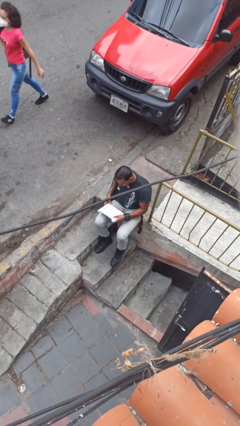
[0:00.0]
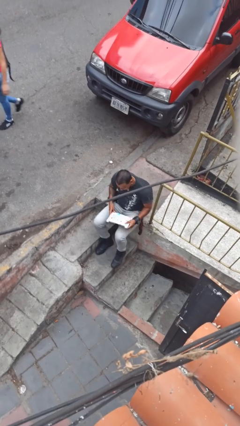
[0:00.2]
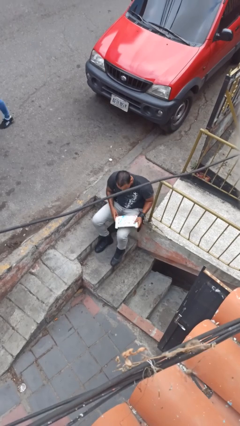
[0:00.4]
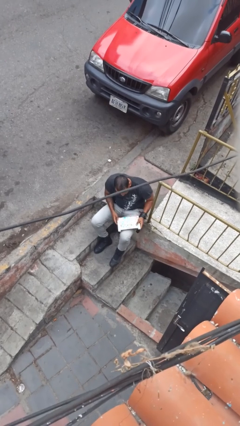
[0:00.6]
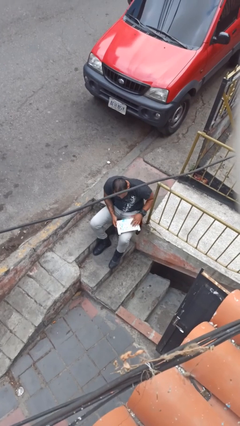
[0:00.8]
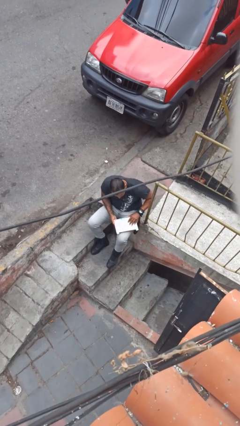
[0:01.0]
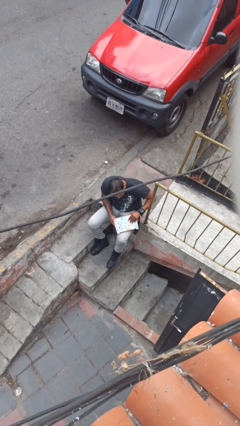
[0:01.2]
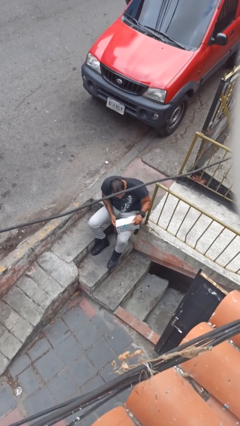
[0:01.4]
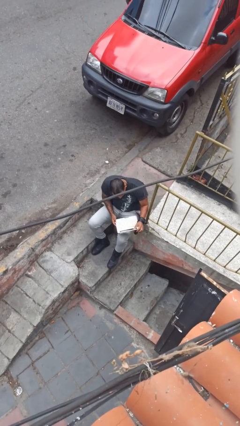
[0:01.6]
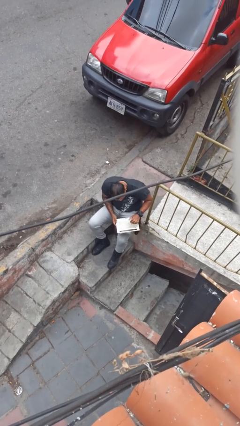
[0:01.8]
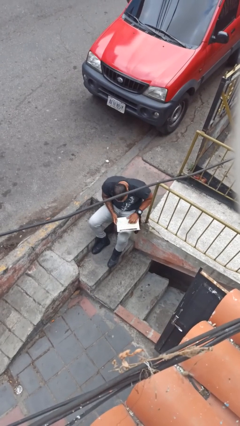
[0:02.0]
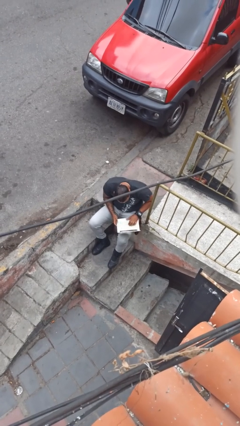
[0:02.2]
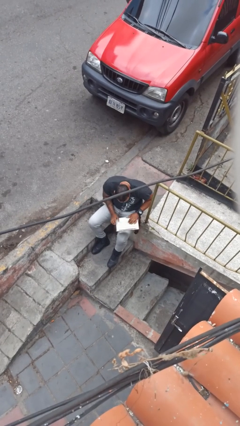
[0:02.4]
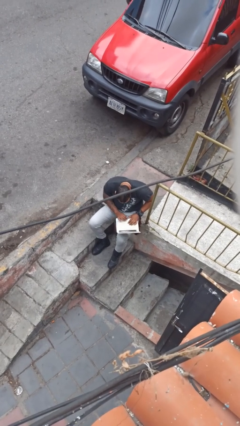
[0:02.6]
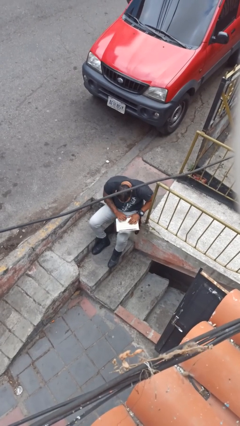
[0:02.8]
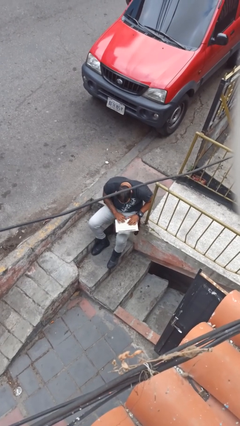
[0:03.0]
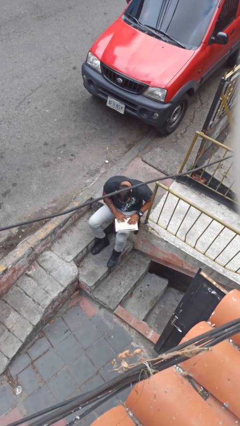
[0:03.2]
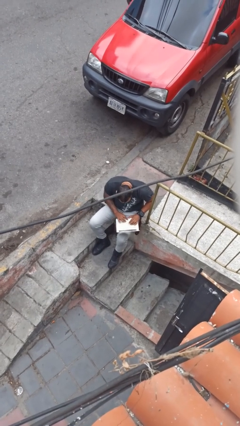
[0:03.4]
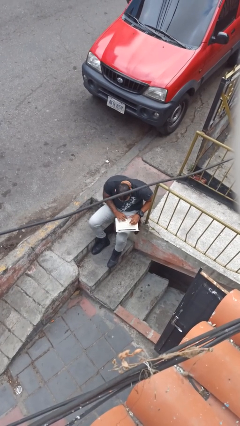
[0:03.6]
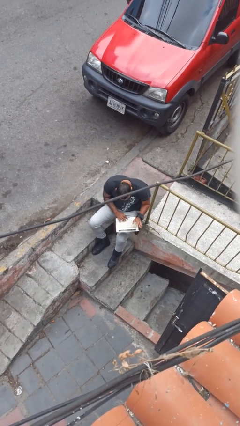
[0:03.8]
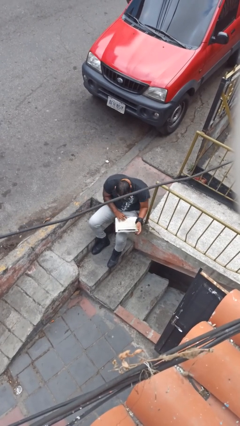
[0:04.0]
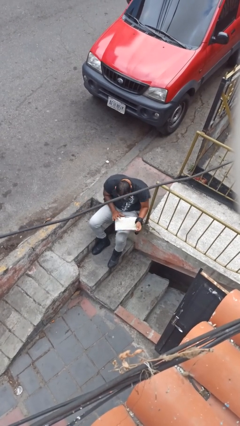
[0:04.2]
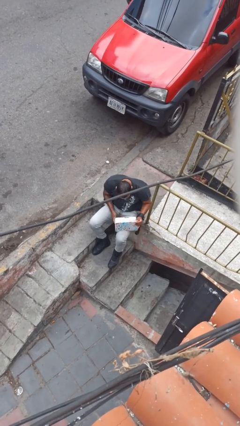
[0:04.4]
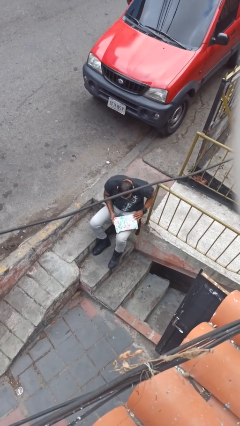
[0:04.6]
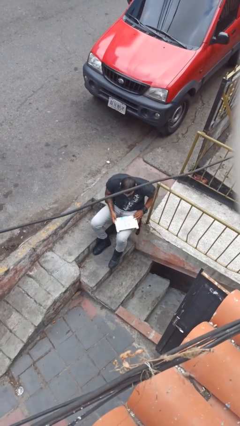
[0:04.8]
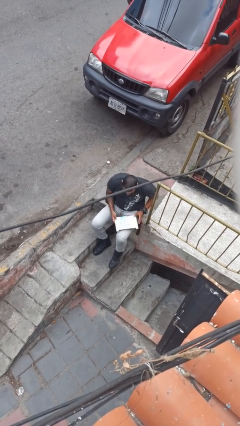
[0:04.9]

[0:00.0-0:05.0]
person interacts with laptop

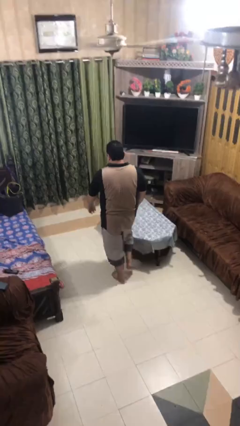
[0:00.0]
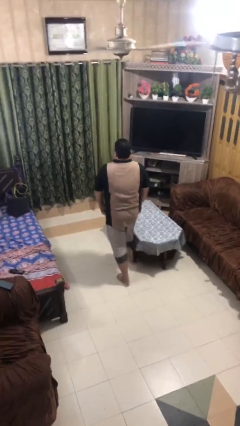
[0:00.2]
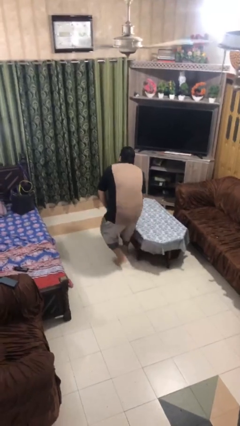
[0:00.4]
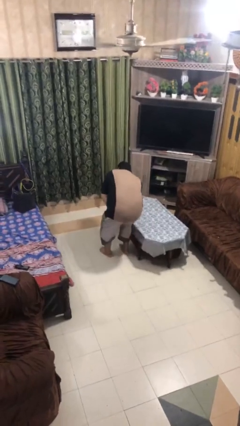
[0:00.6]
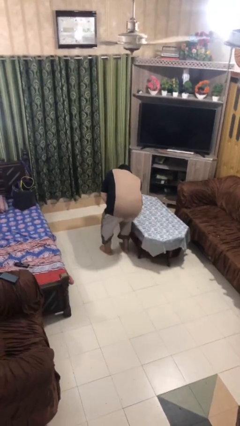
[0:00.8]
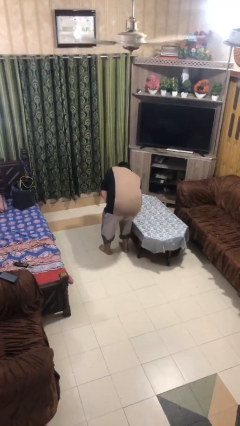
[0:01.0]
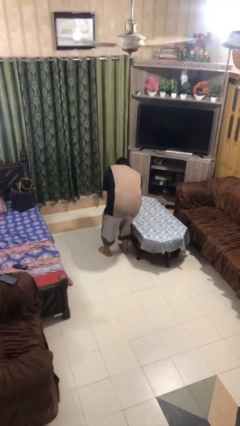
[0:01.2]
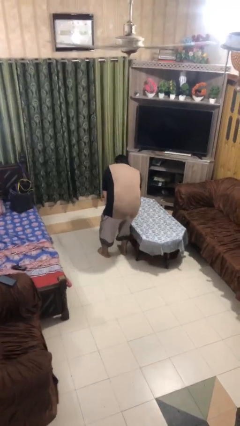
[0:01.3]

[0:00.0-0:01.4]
person bumps into table

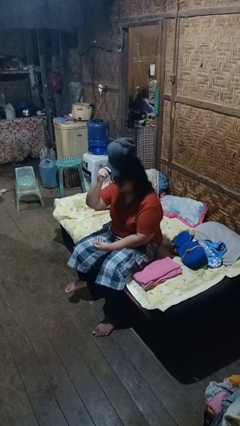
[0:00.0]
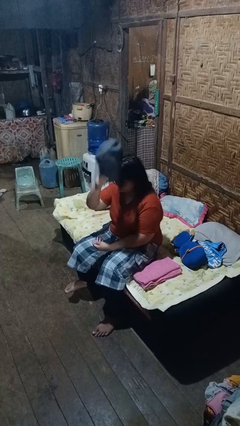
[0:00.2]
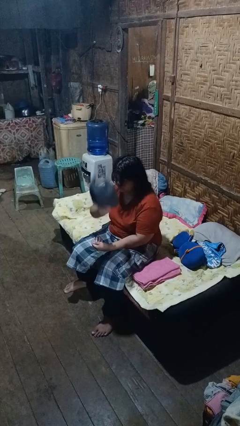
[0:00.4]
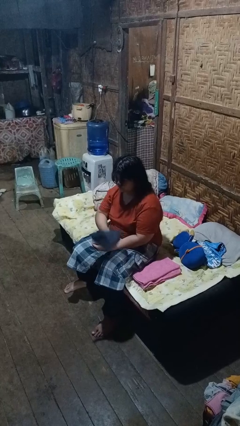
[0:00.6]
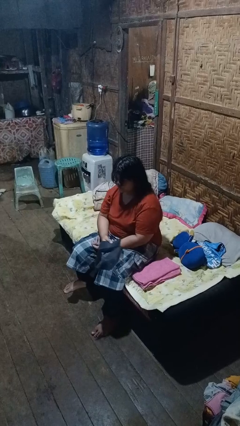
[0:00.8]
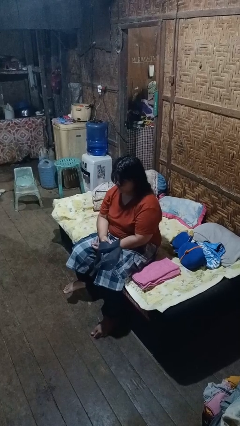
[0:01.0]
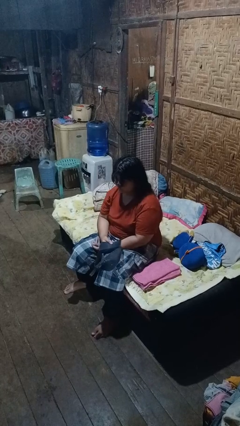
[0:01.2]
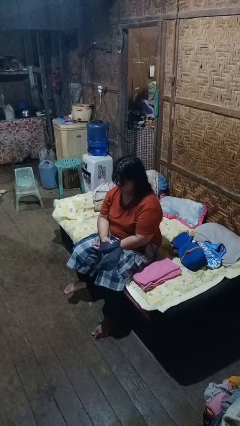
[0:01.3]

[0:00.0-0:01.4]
person takes off hat

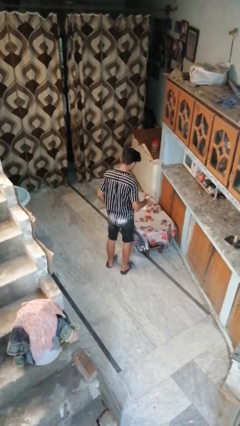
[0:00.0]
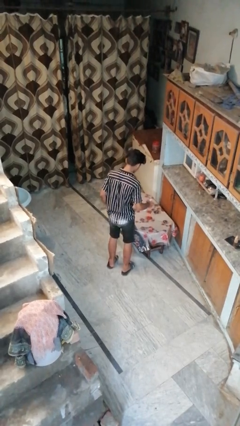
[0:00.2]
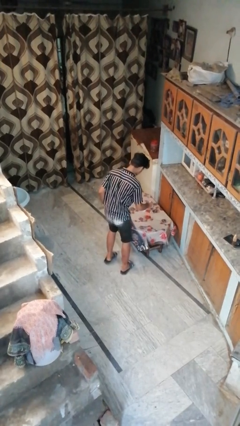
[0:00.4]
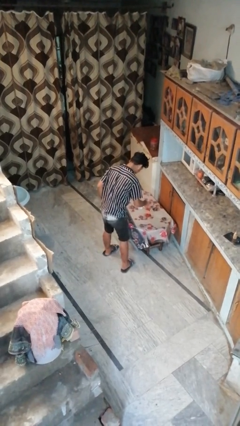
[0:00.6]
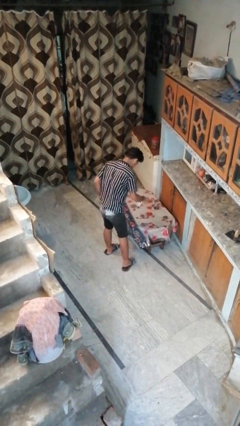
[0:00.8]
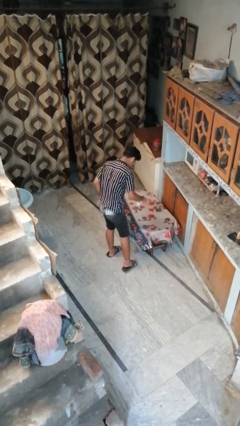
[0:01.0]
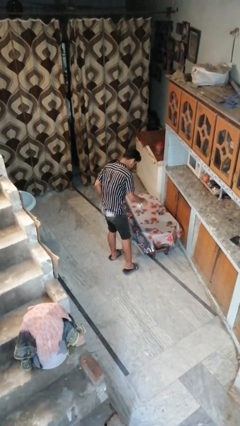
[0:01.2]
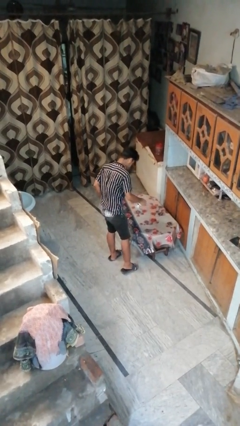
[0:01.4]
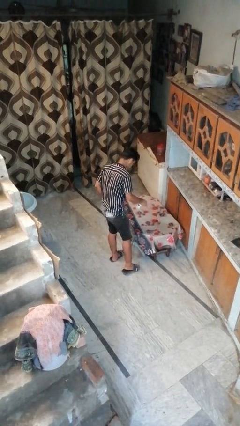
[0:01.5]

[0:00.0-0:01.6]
person sprays from bottle

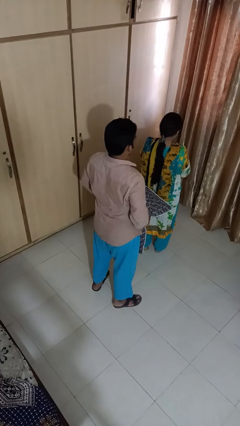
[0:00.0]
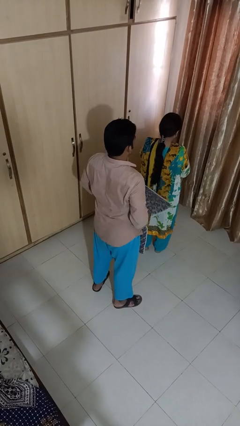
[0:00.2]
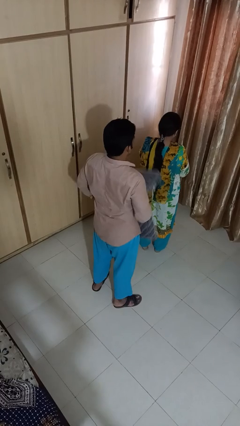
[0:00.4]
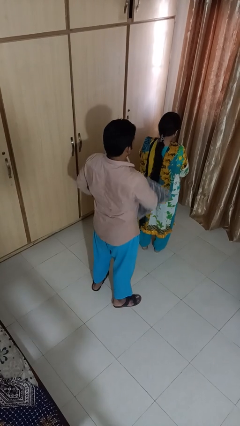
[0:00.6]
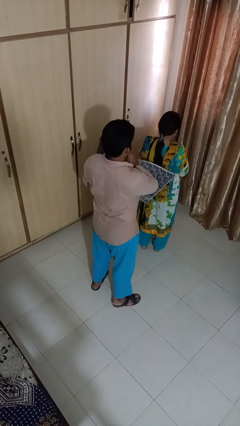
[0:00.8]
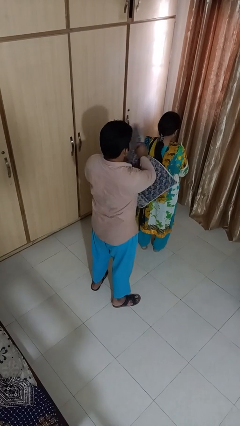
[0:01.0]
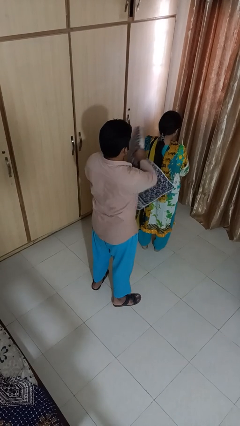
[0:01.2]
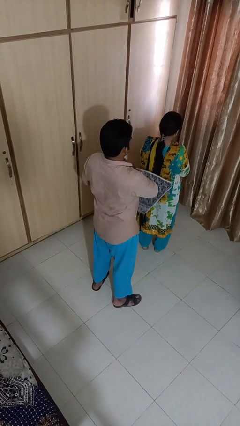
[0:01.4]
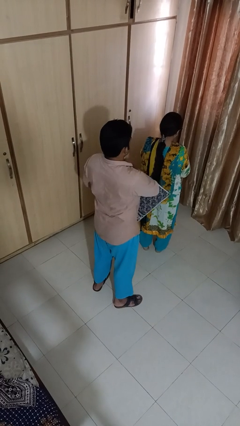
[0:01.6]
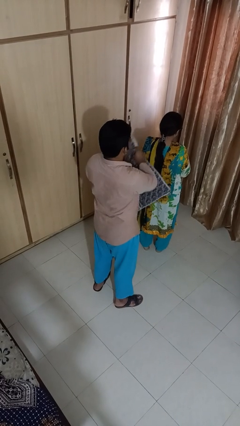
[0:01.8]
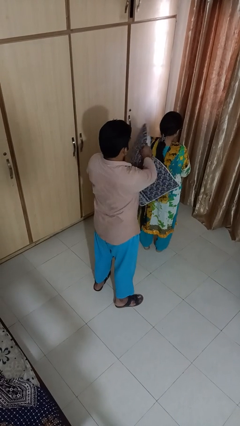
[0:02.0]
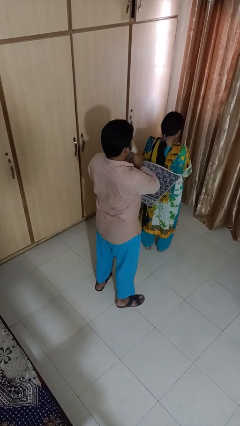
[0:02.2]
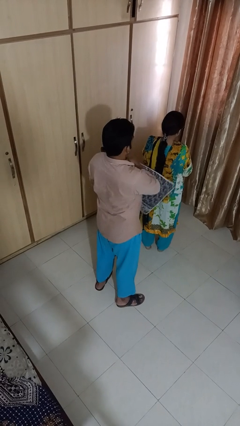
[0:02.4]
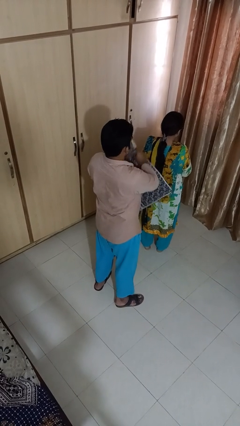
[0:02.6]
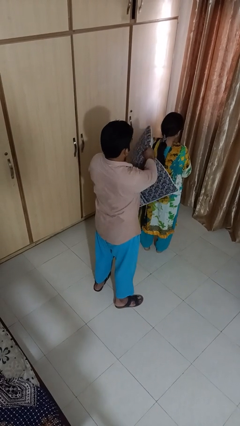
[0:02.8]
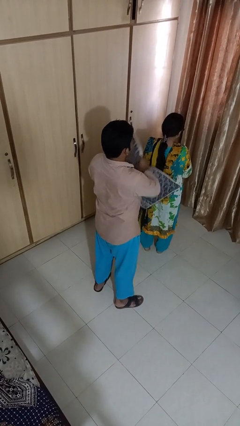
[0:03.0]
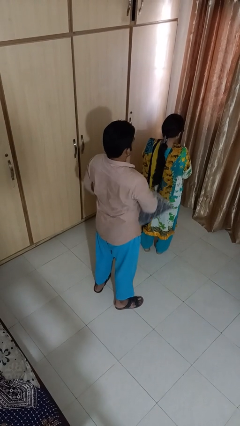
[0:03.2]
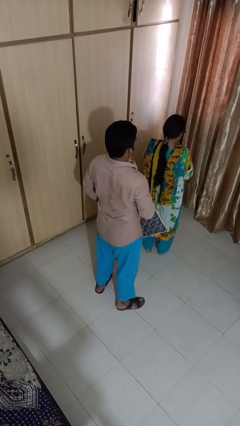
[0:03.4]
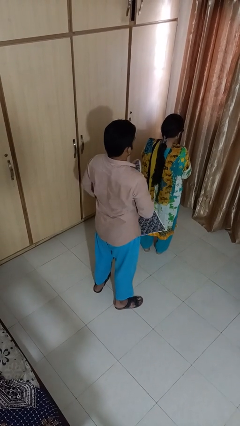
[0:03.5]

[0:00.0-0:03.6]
person hits person with pillow

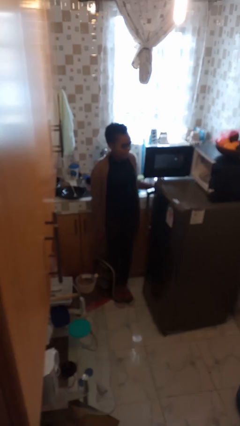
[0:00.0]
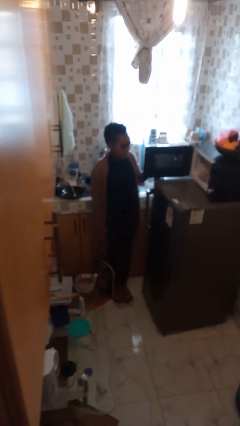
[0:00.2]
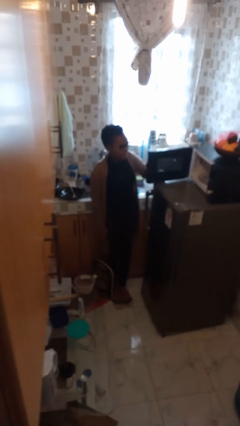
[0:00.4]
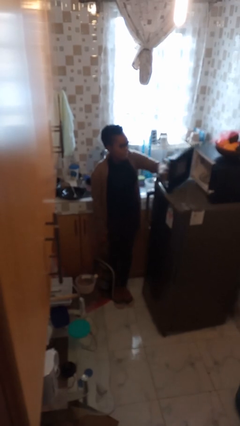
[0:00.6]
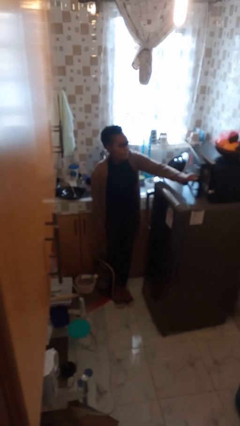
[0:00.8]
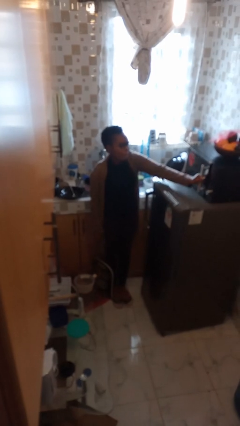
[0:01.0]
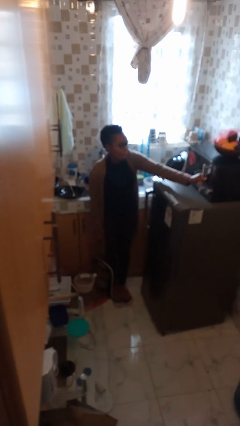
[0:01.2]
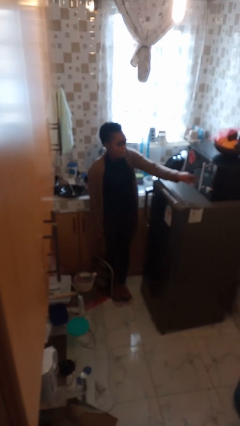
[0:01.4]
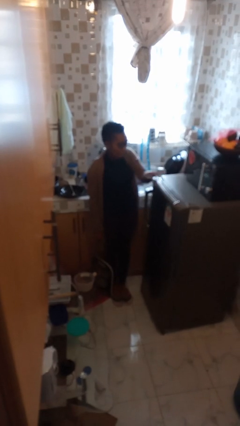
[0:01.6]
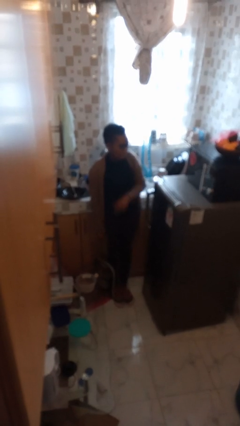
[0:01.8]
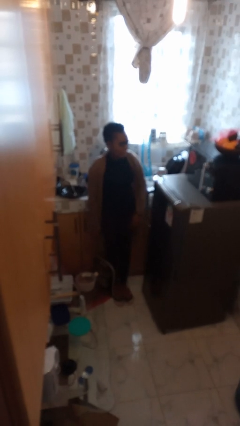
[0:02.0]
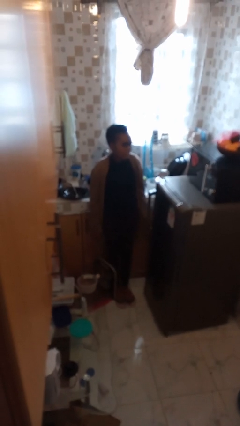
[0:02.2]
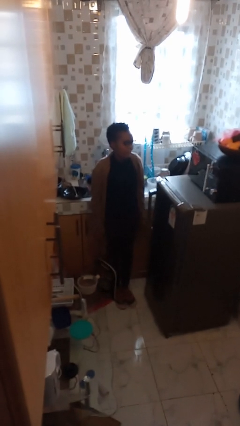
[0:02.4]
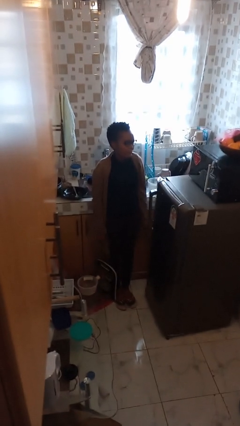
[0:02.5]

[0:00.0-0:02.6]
person closes microwave

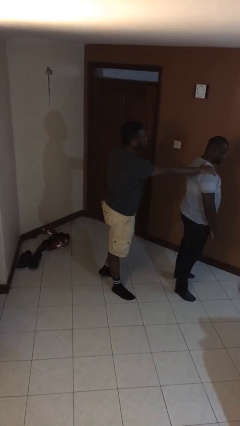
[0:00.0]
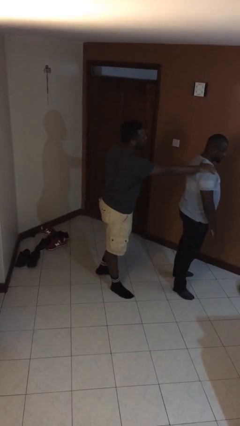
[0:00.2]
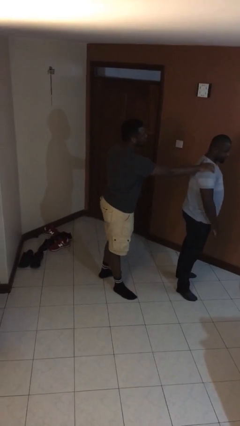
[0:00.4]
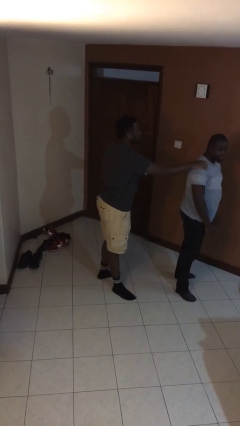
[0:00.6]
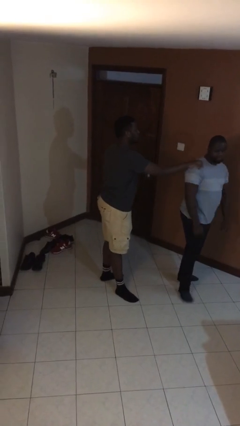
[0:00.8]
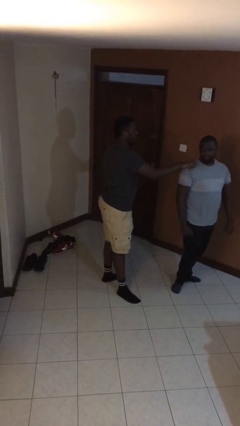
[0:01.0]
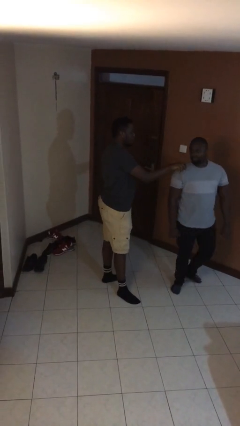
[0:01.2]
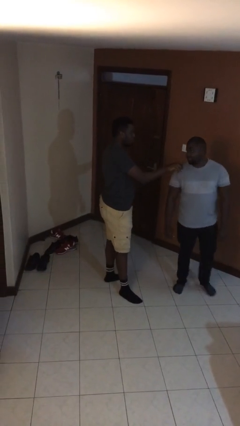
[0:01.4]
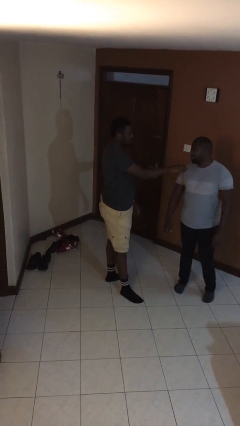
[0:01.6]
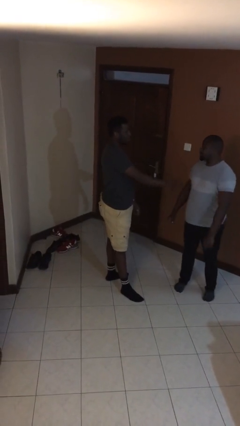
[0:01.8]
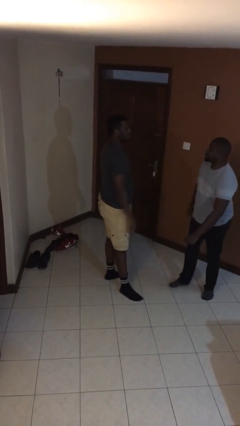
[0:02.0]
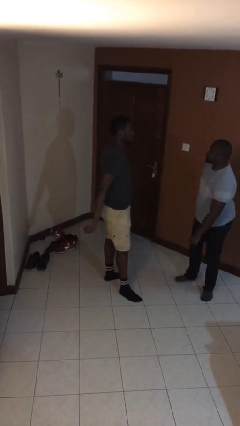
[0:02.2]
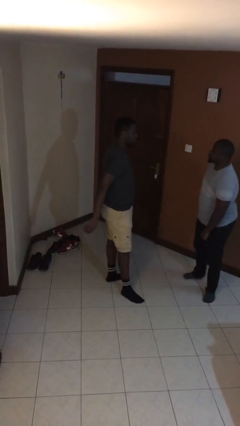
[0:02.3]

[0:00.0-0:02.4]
person spins person around
